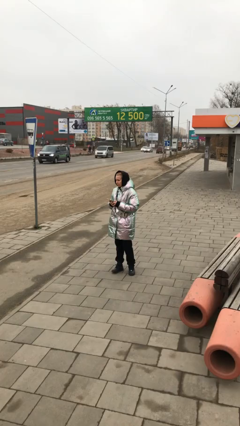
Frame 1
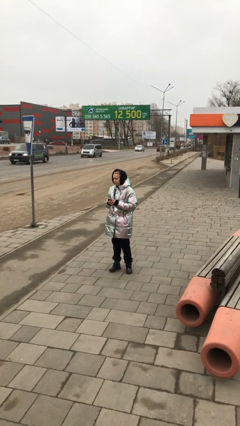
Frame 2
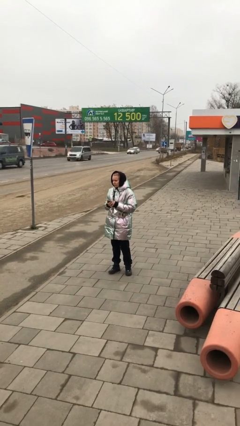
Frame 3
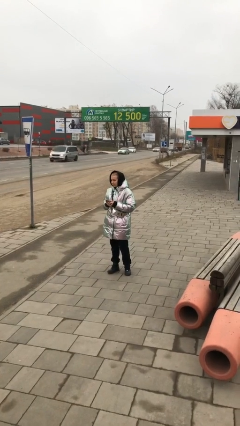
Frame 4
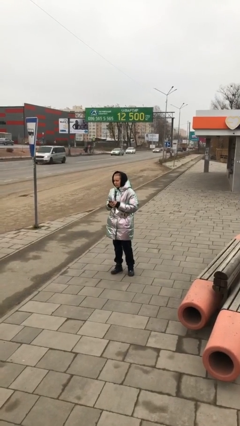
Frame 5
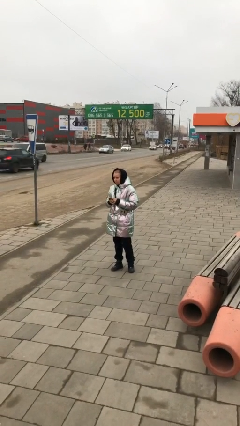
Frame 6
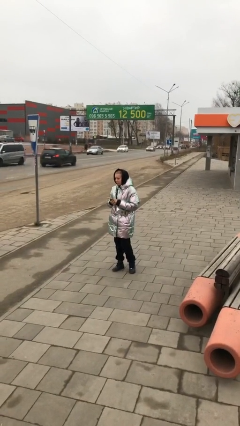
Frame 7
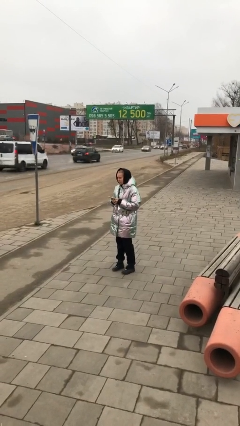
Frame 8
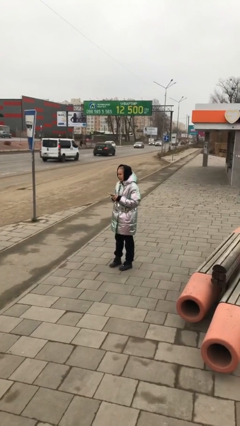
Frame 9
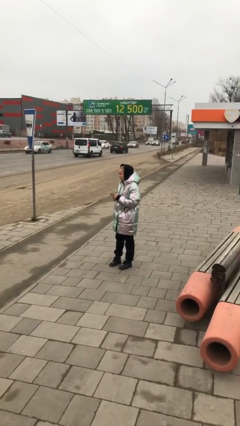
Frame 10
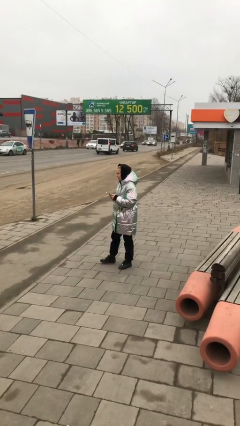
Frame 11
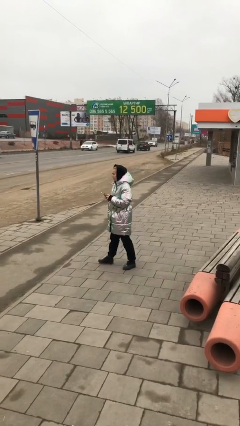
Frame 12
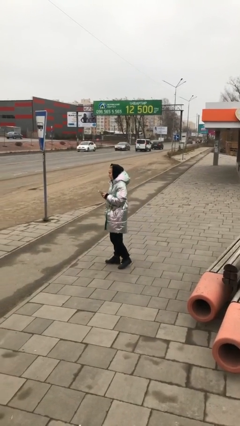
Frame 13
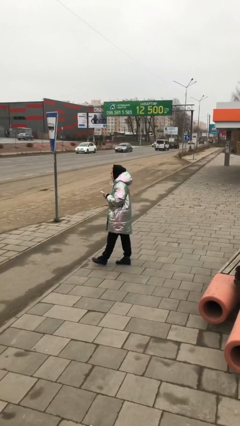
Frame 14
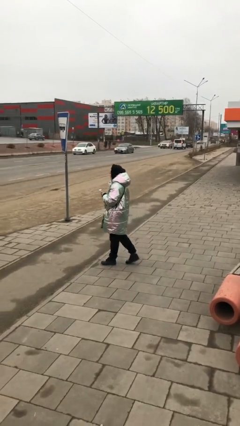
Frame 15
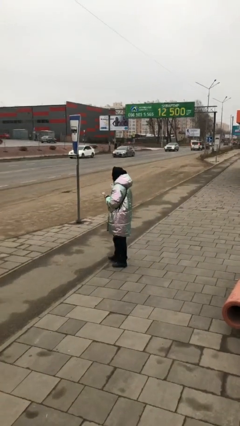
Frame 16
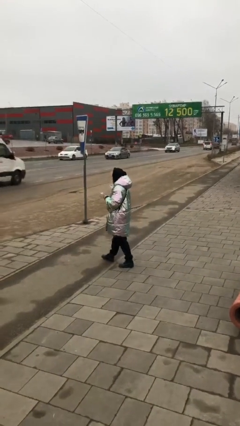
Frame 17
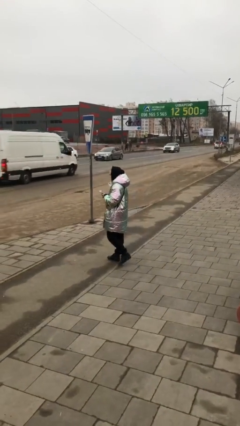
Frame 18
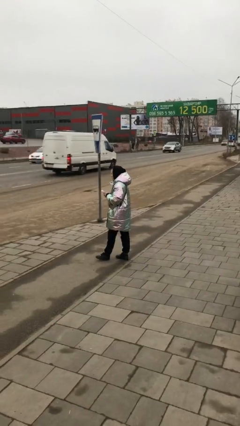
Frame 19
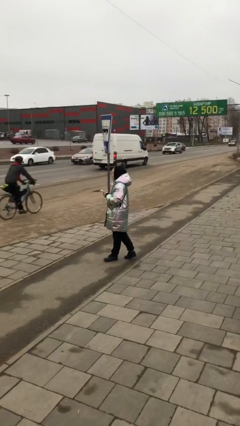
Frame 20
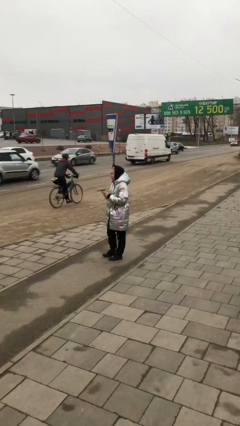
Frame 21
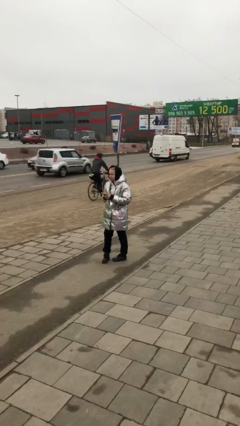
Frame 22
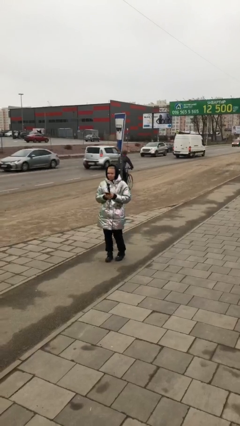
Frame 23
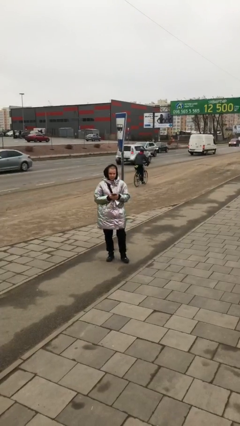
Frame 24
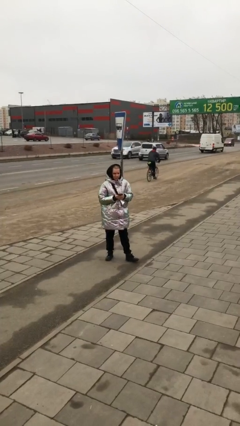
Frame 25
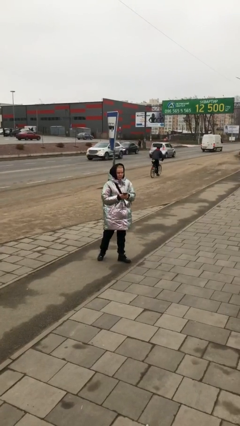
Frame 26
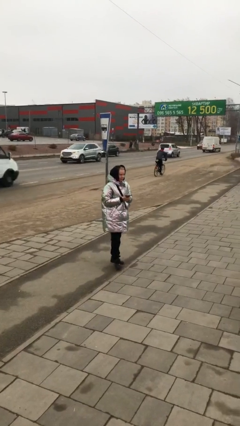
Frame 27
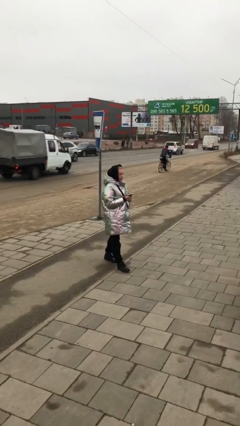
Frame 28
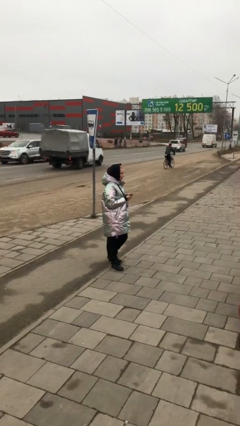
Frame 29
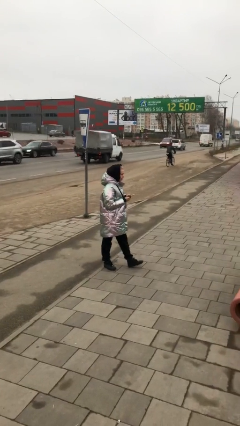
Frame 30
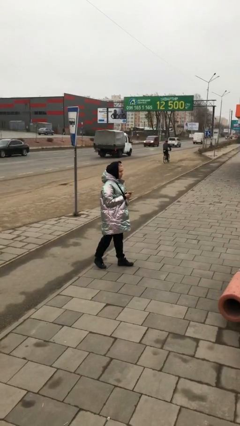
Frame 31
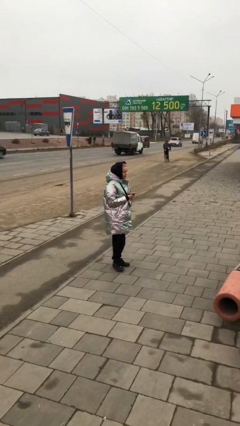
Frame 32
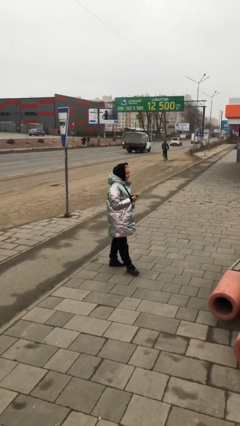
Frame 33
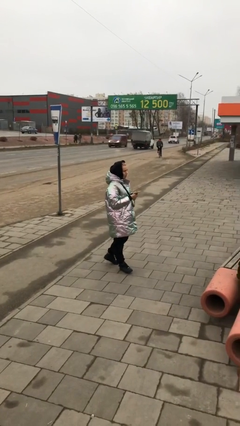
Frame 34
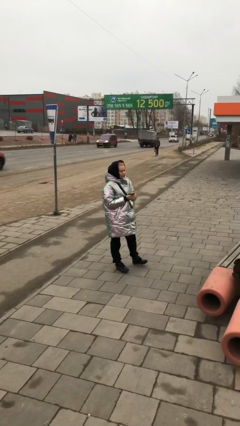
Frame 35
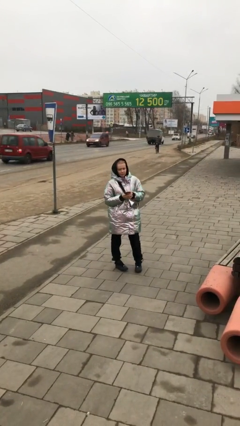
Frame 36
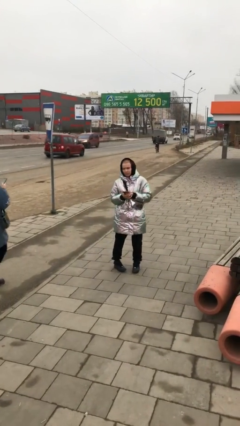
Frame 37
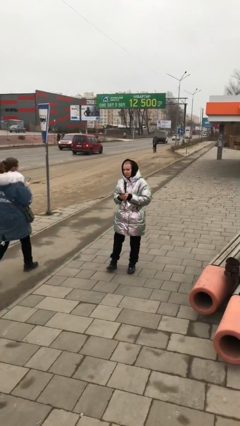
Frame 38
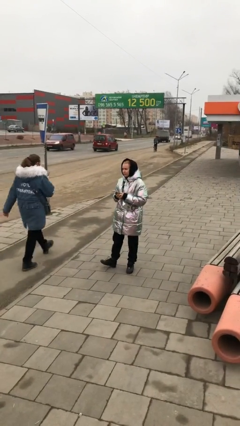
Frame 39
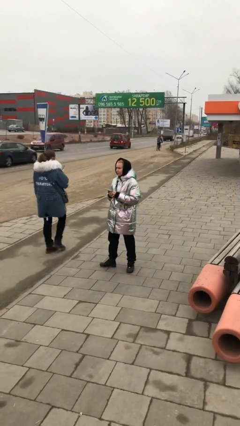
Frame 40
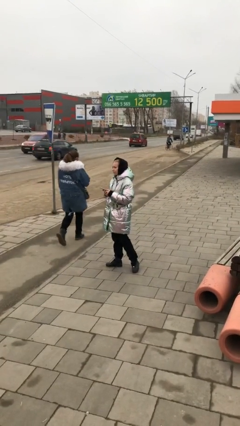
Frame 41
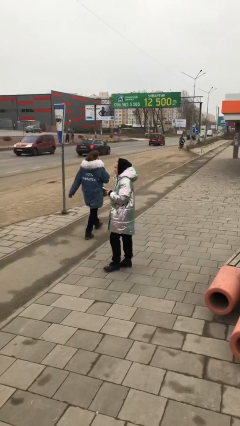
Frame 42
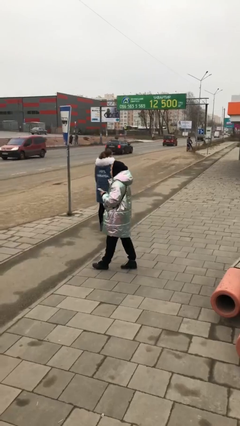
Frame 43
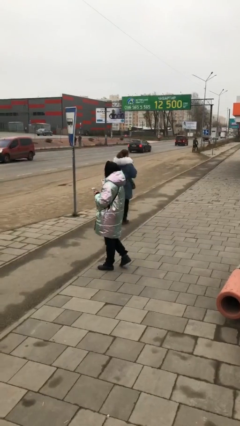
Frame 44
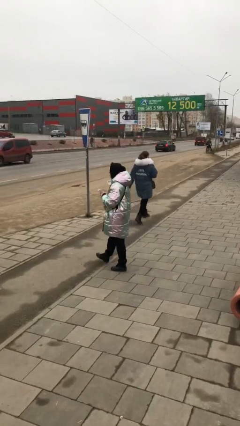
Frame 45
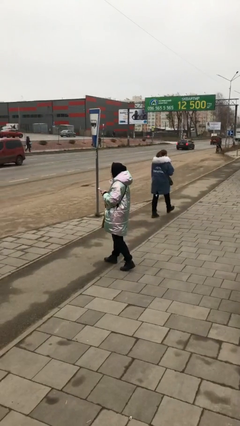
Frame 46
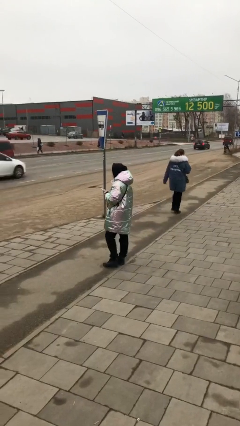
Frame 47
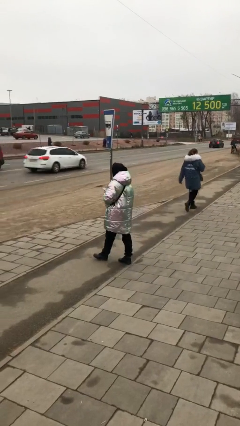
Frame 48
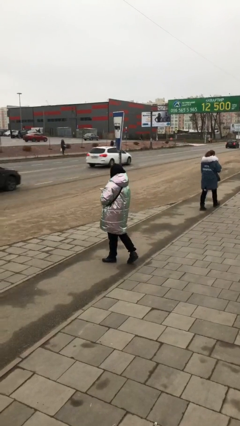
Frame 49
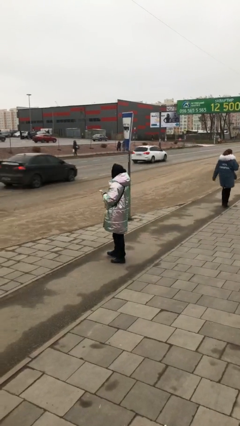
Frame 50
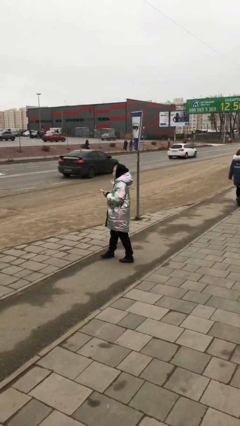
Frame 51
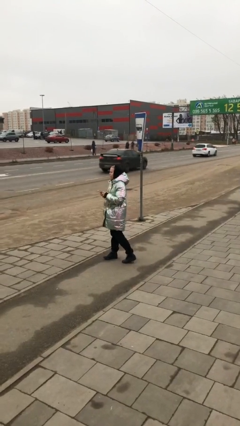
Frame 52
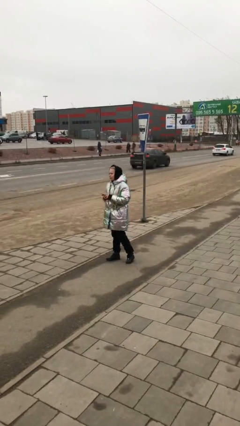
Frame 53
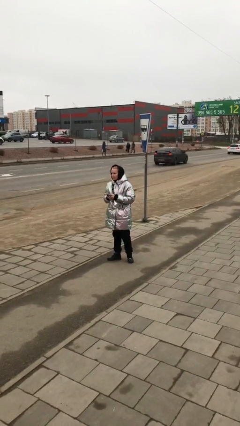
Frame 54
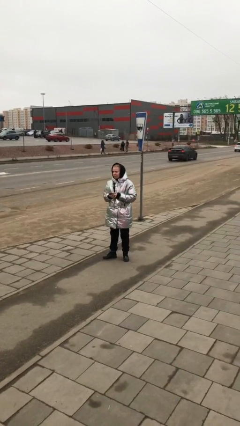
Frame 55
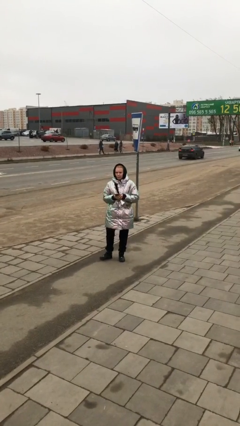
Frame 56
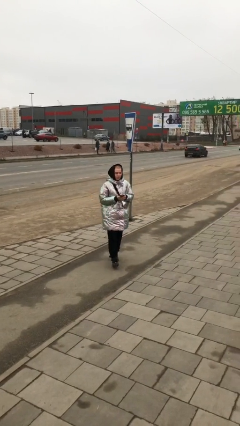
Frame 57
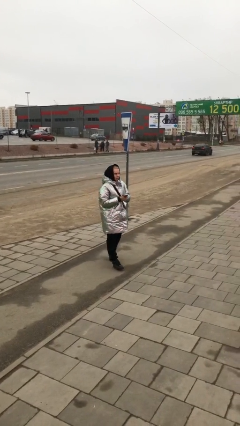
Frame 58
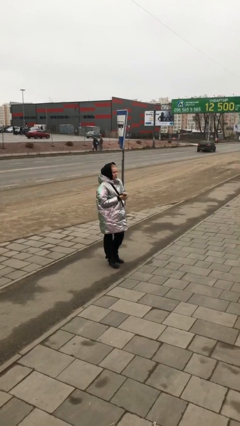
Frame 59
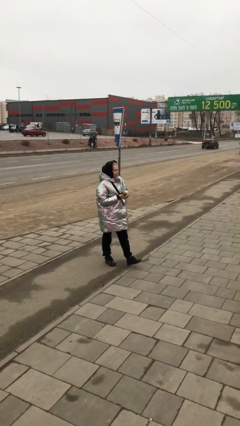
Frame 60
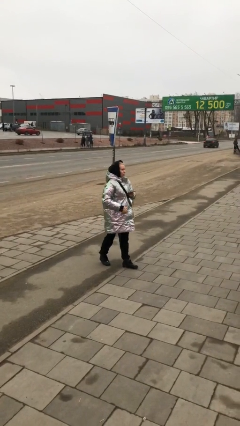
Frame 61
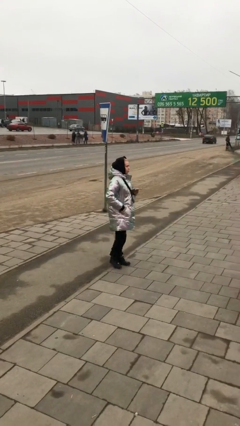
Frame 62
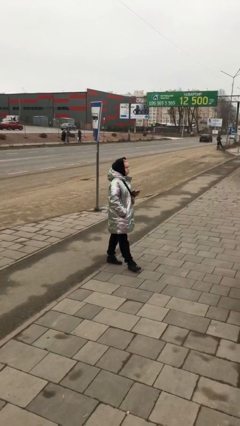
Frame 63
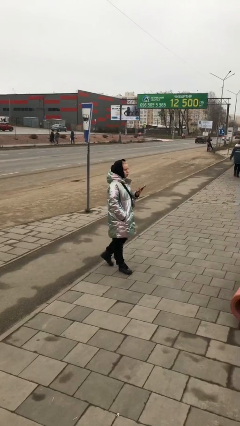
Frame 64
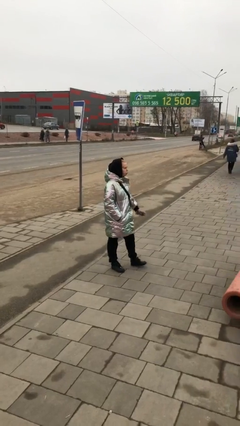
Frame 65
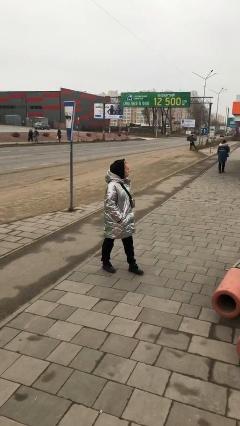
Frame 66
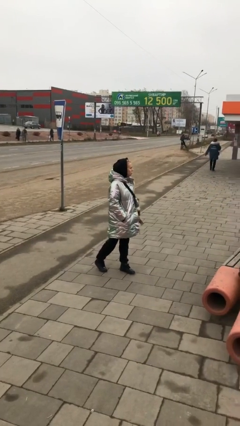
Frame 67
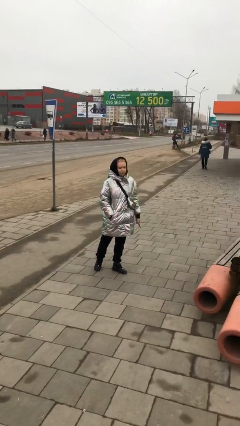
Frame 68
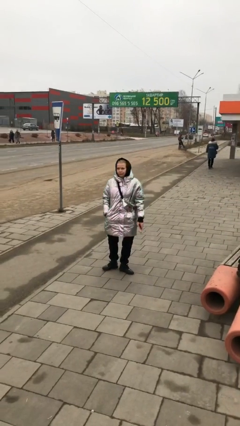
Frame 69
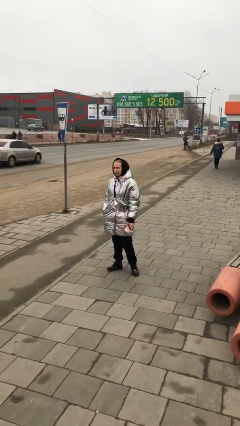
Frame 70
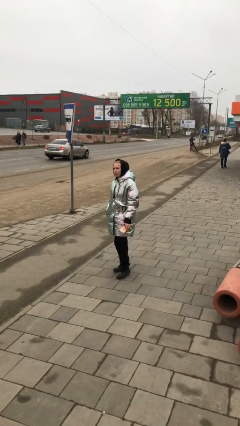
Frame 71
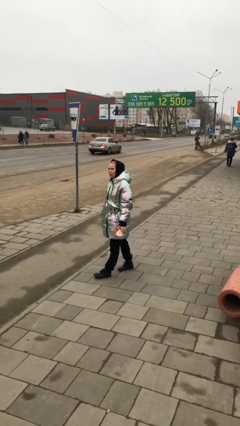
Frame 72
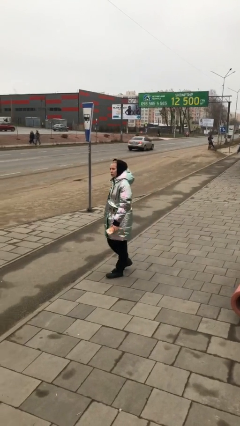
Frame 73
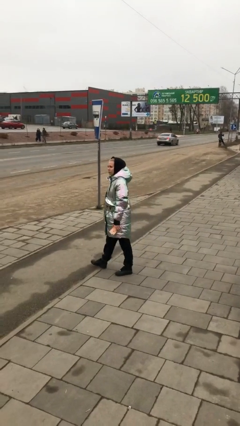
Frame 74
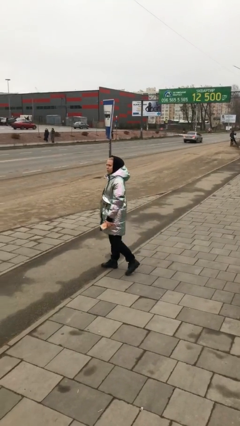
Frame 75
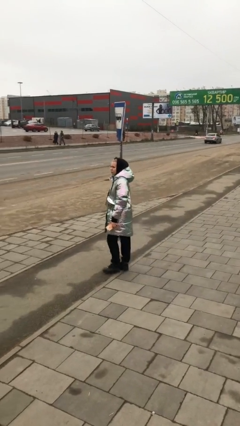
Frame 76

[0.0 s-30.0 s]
person walks

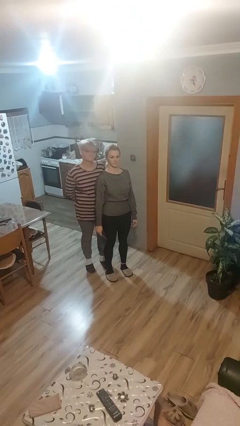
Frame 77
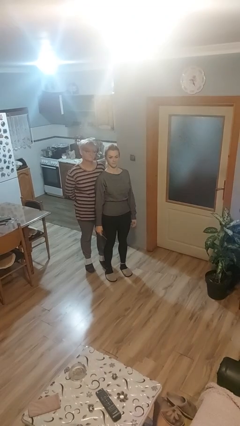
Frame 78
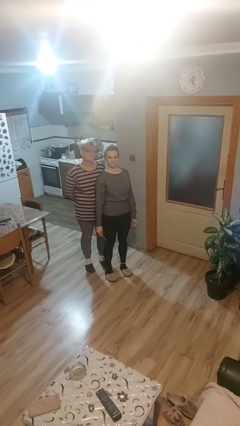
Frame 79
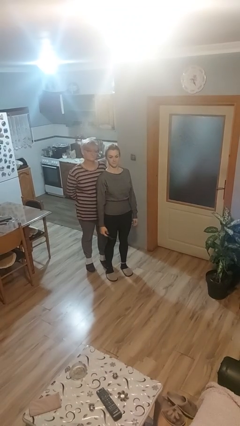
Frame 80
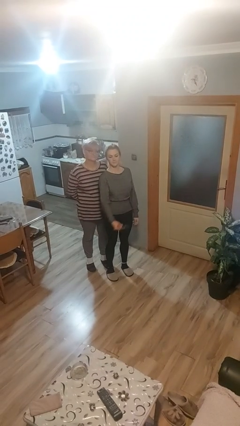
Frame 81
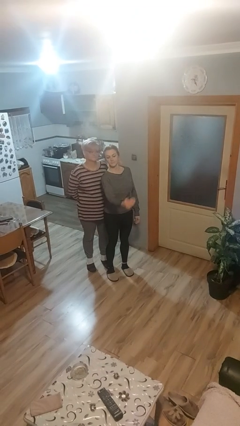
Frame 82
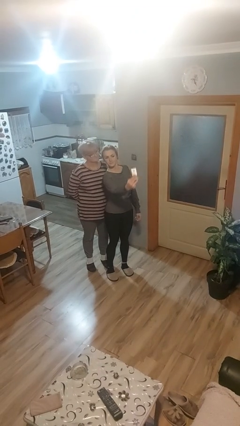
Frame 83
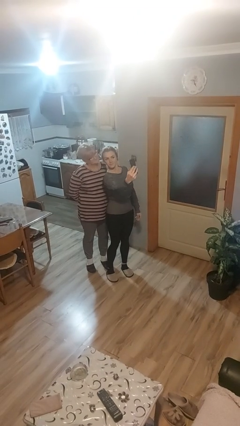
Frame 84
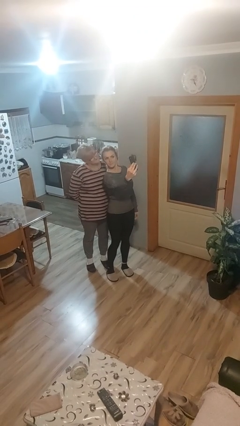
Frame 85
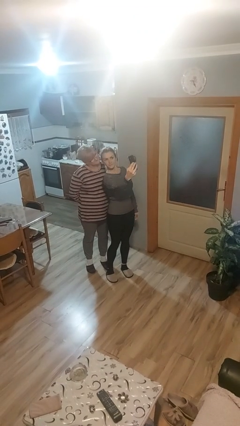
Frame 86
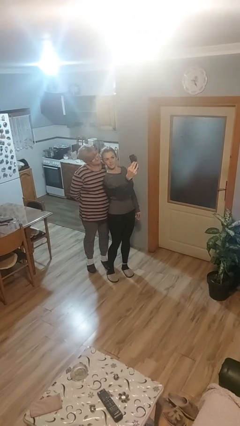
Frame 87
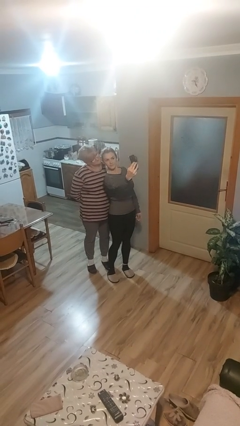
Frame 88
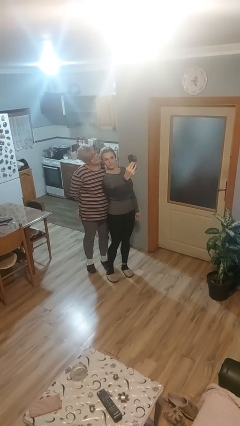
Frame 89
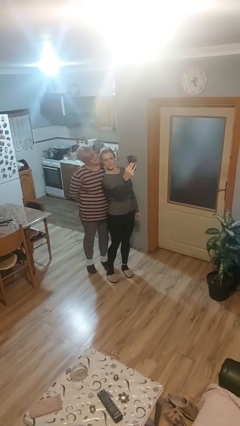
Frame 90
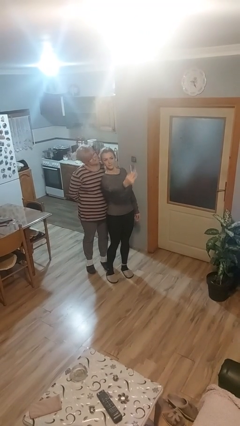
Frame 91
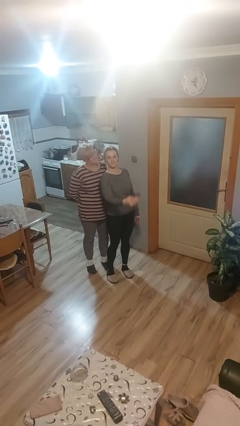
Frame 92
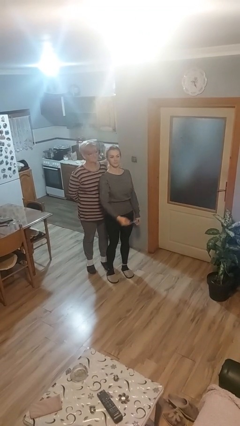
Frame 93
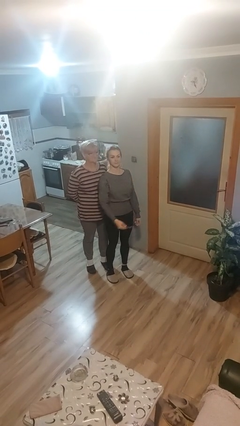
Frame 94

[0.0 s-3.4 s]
person takes selfie with person
